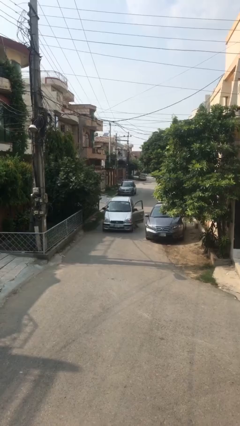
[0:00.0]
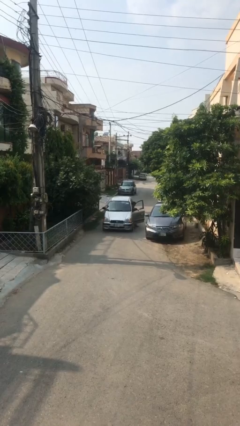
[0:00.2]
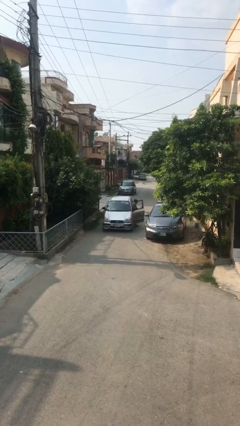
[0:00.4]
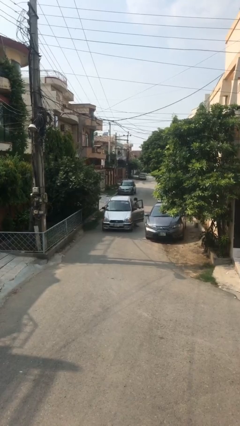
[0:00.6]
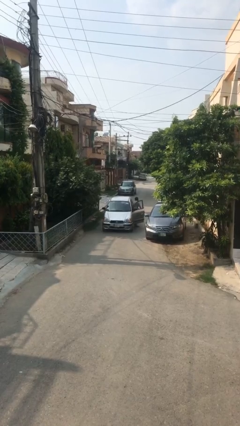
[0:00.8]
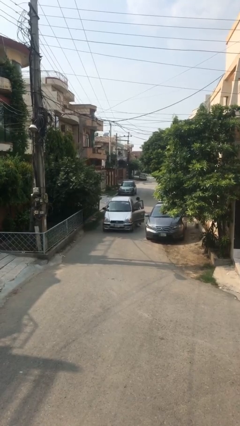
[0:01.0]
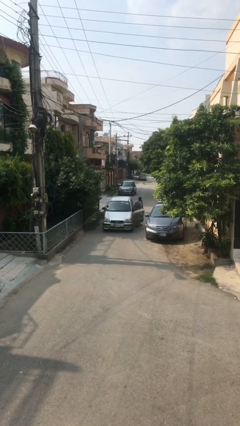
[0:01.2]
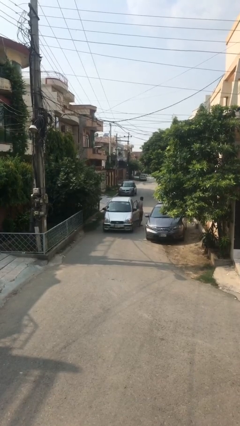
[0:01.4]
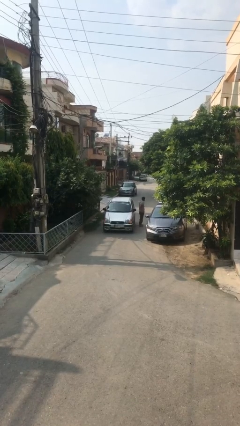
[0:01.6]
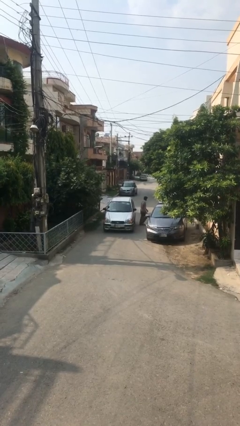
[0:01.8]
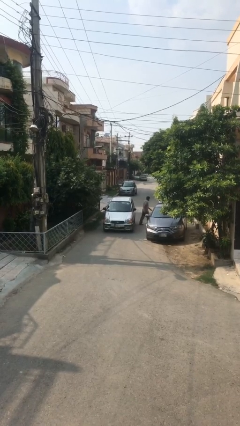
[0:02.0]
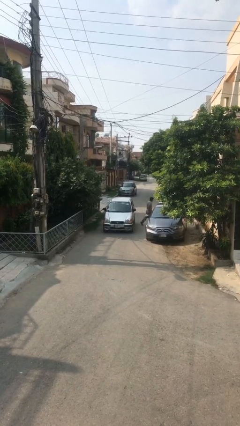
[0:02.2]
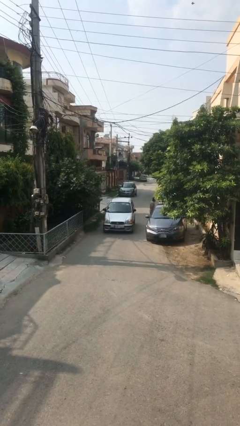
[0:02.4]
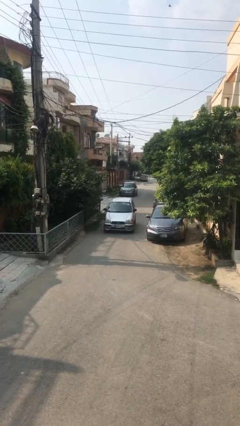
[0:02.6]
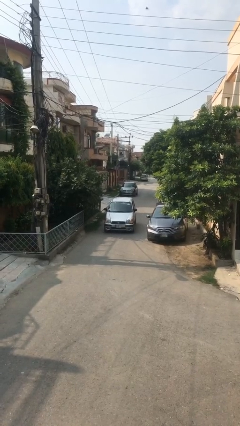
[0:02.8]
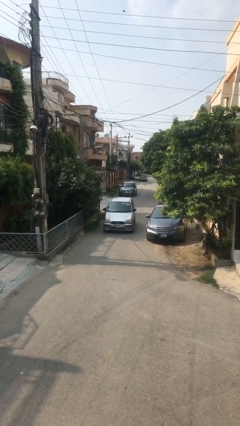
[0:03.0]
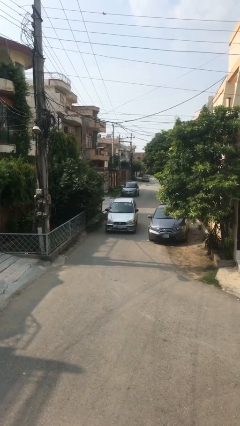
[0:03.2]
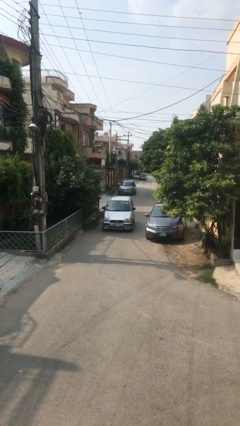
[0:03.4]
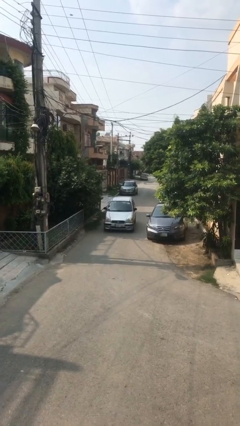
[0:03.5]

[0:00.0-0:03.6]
car drops off person

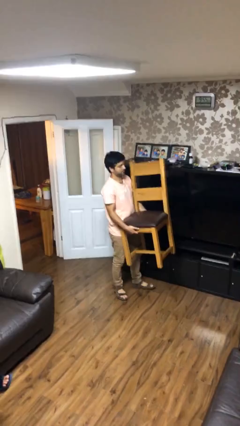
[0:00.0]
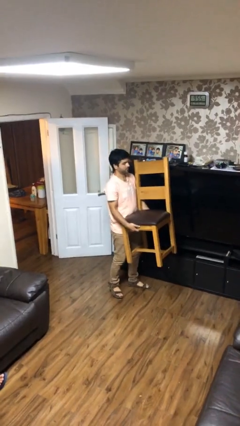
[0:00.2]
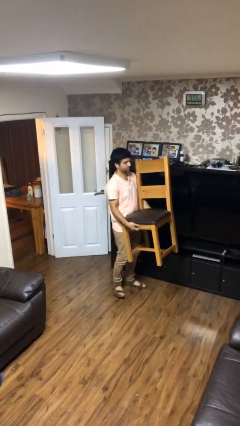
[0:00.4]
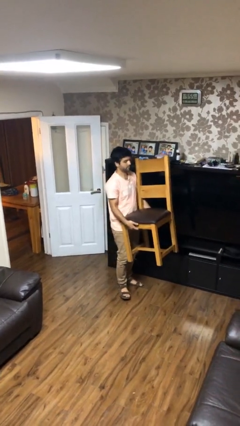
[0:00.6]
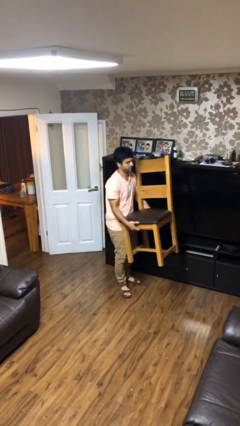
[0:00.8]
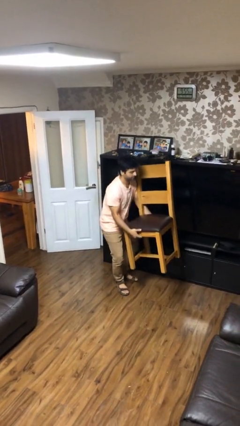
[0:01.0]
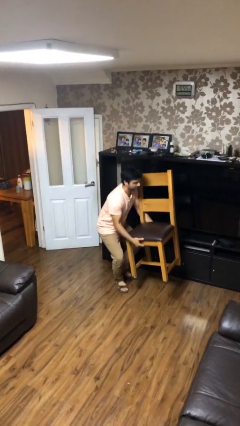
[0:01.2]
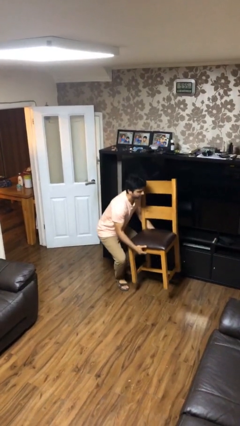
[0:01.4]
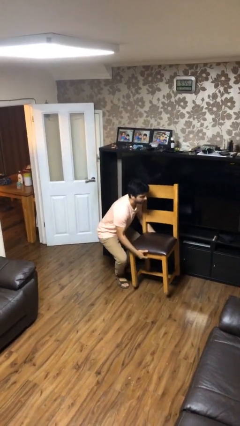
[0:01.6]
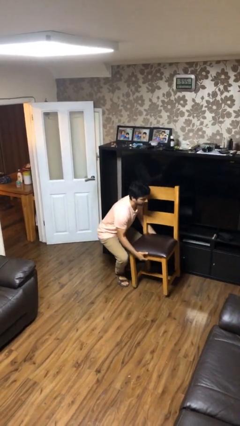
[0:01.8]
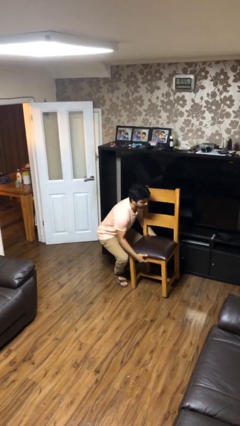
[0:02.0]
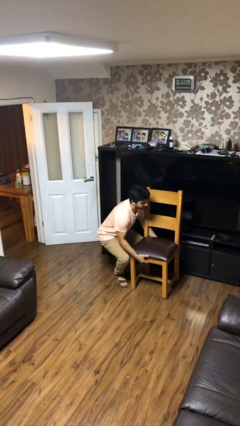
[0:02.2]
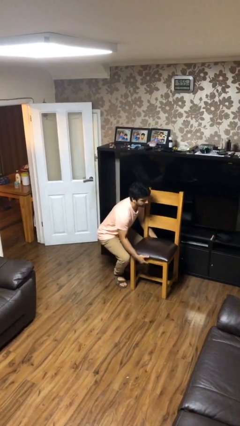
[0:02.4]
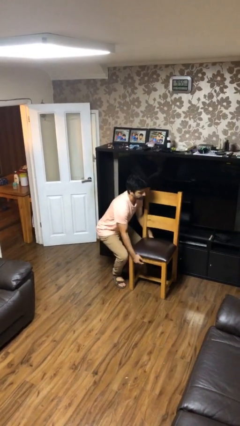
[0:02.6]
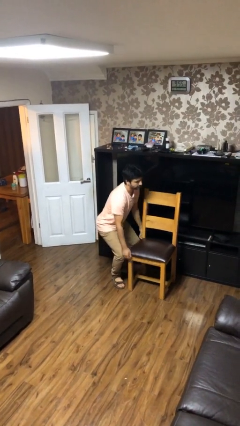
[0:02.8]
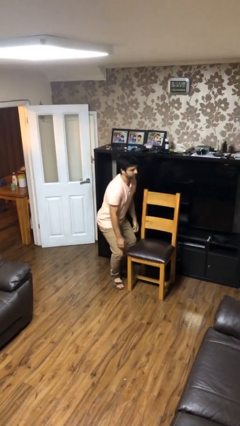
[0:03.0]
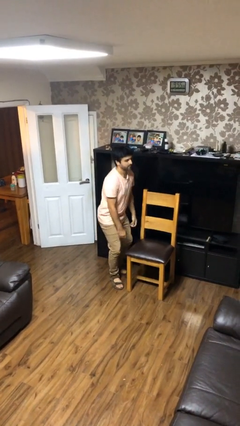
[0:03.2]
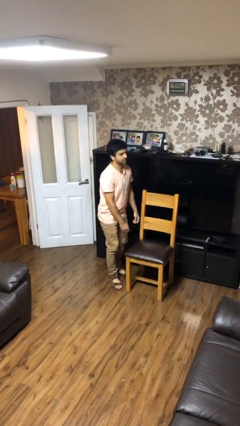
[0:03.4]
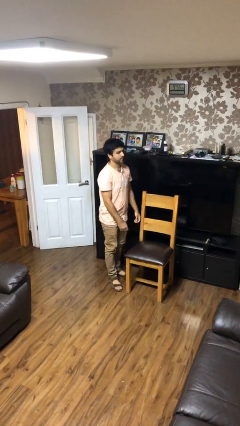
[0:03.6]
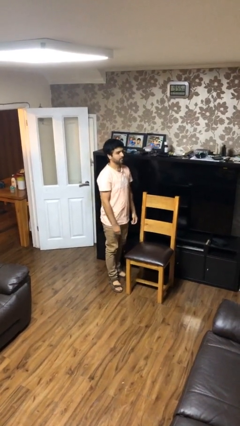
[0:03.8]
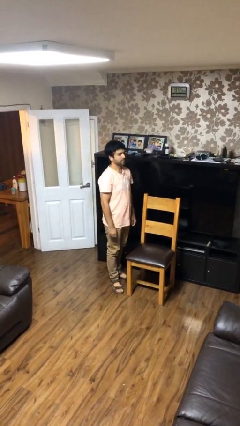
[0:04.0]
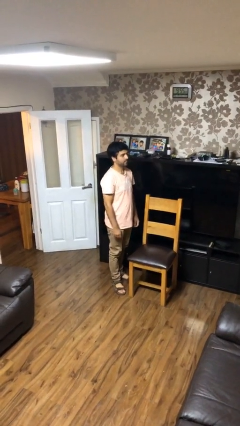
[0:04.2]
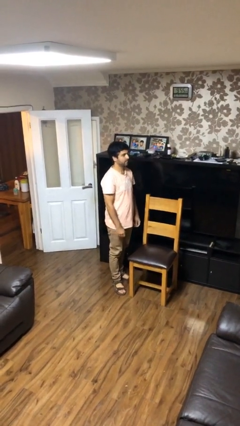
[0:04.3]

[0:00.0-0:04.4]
person puts down object on floor

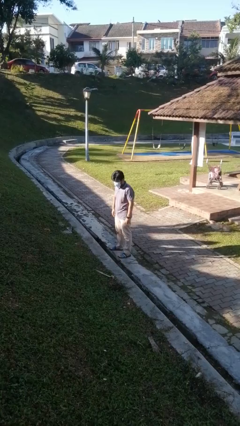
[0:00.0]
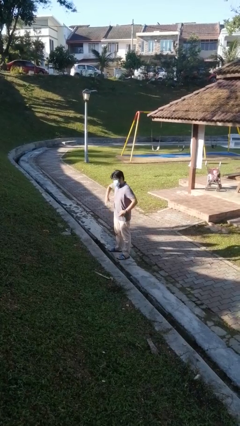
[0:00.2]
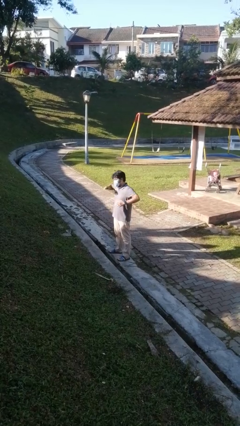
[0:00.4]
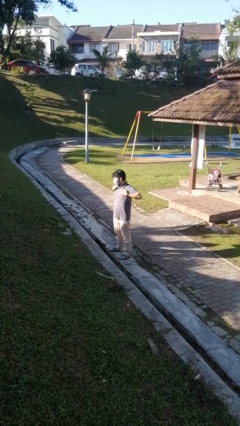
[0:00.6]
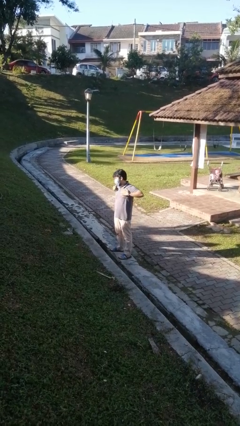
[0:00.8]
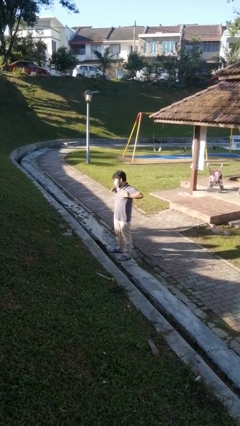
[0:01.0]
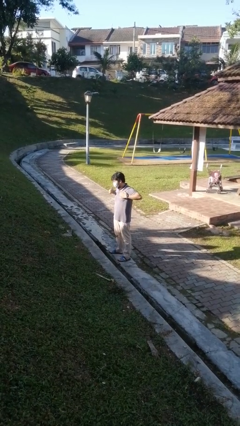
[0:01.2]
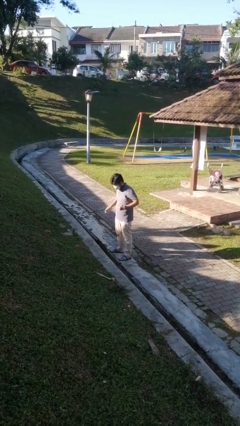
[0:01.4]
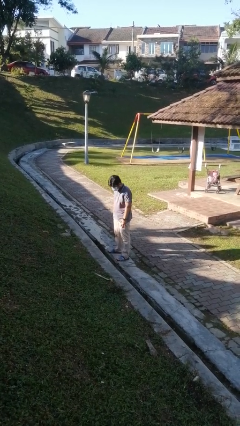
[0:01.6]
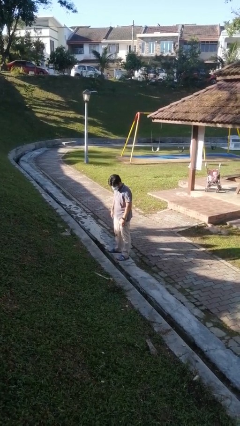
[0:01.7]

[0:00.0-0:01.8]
person drums on chest

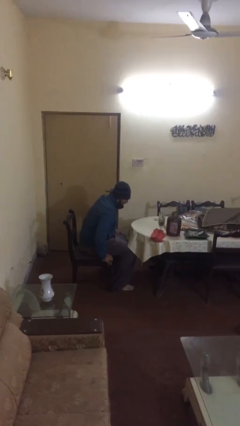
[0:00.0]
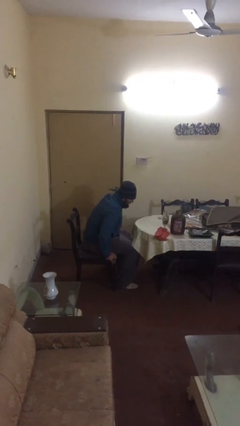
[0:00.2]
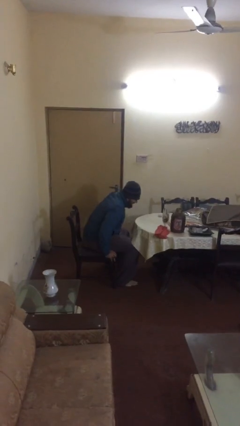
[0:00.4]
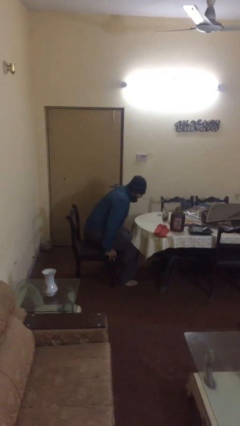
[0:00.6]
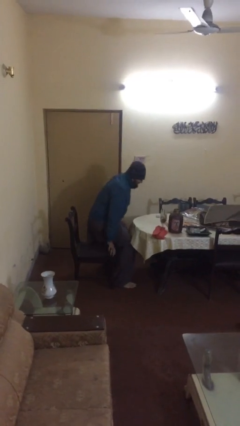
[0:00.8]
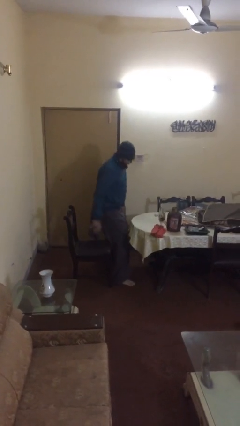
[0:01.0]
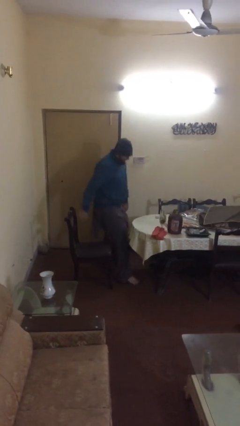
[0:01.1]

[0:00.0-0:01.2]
person stands up

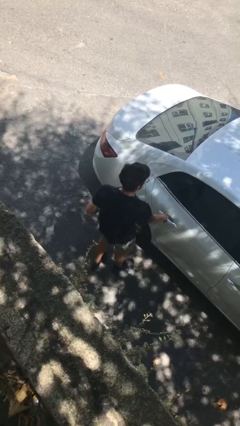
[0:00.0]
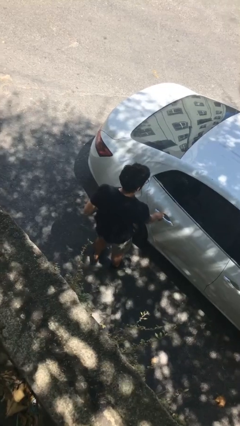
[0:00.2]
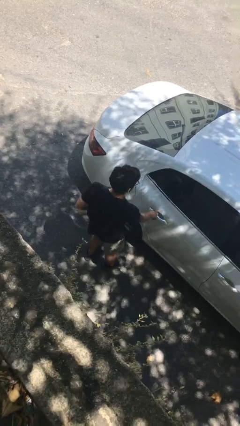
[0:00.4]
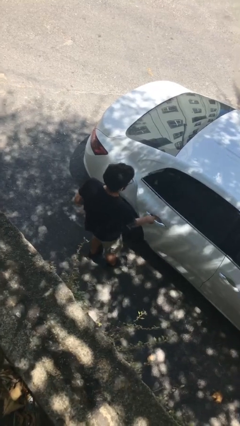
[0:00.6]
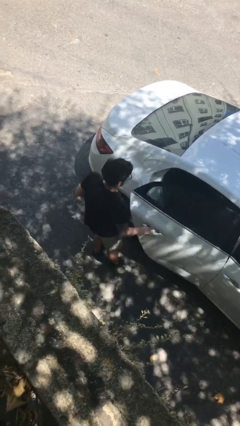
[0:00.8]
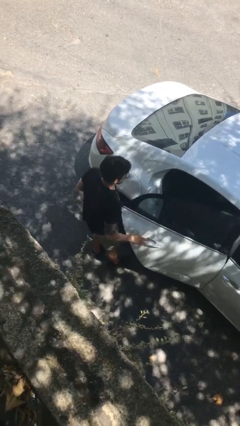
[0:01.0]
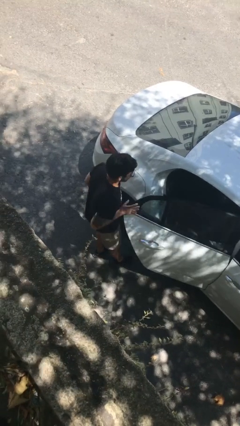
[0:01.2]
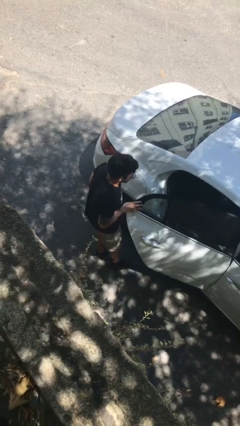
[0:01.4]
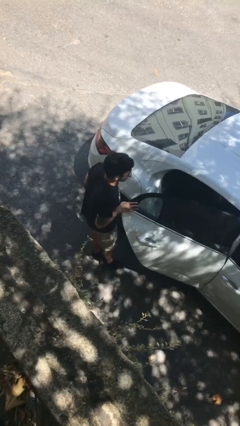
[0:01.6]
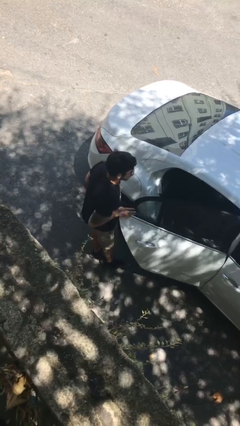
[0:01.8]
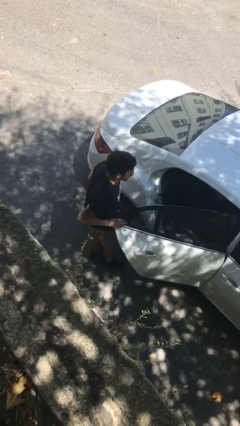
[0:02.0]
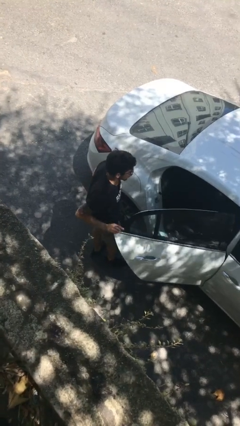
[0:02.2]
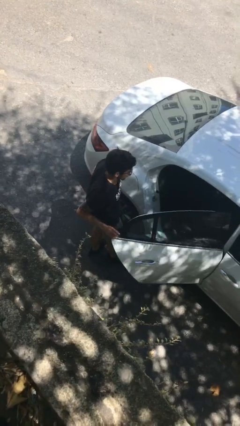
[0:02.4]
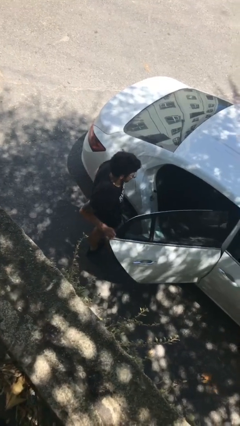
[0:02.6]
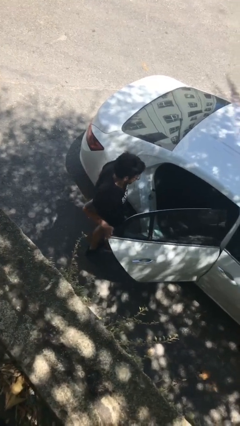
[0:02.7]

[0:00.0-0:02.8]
person opens car door

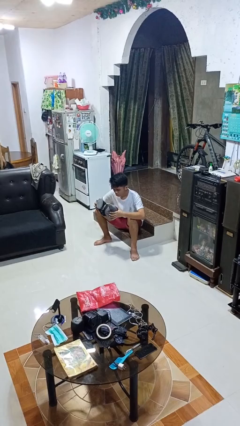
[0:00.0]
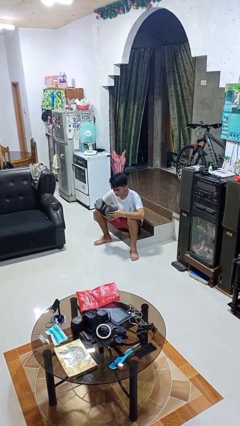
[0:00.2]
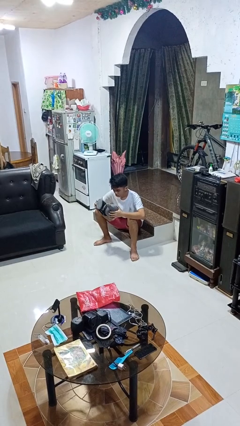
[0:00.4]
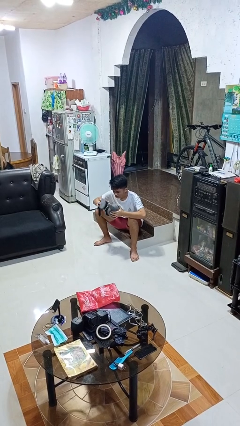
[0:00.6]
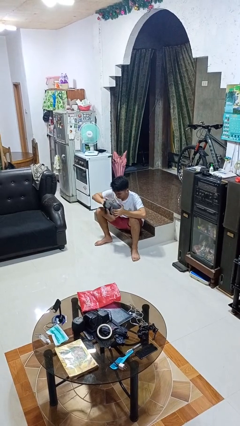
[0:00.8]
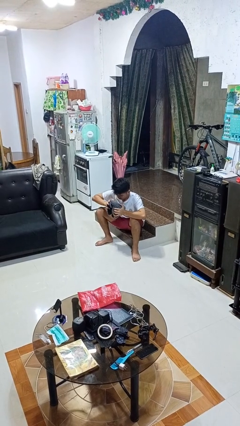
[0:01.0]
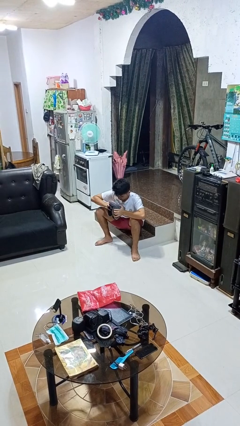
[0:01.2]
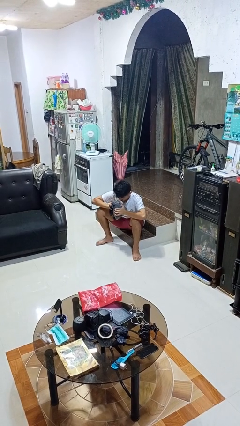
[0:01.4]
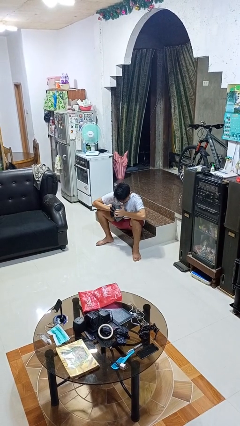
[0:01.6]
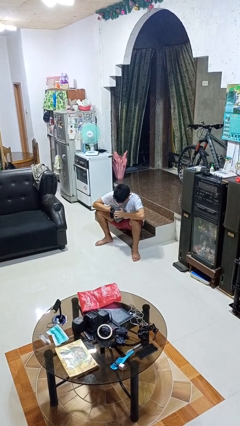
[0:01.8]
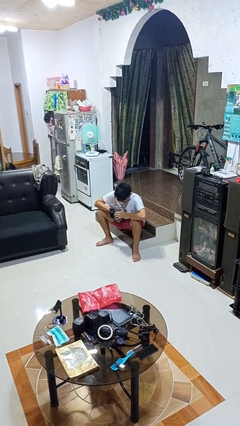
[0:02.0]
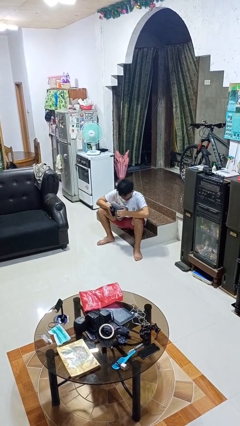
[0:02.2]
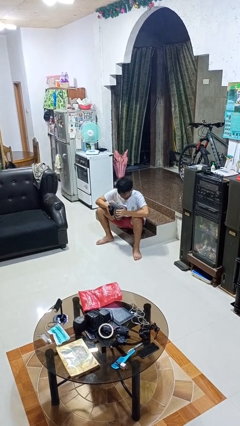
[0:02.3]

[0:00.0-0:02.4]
person squeezes object

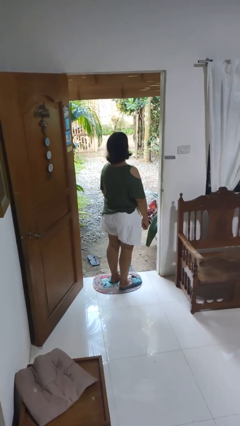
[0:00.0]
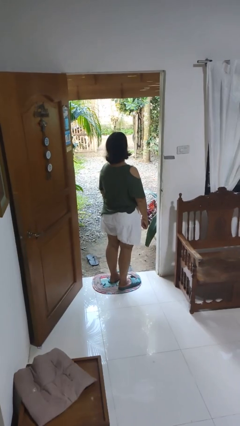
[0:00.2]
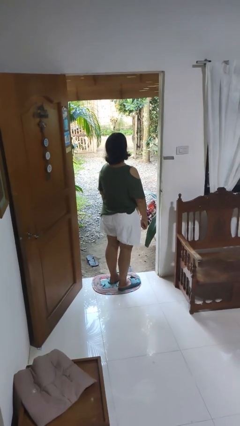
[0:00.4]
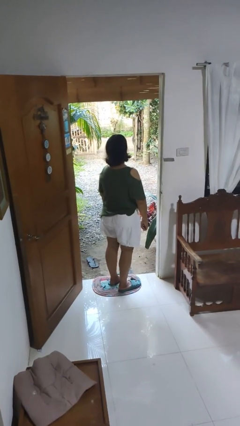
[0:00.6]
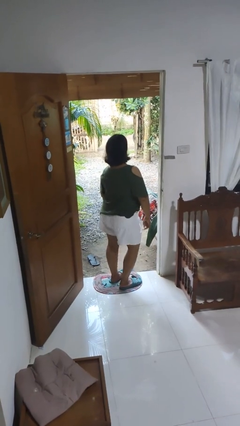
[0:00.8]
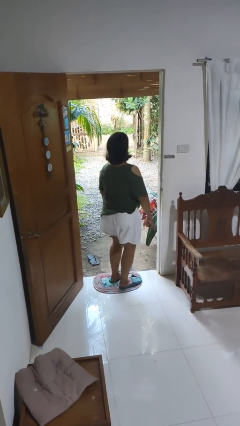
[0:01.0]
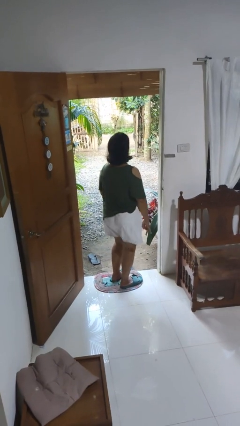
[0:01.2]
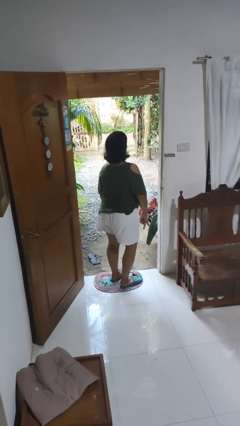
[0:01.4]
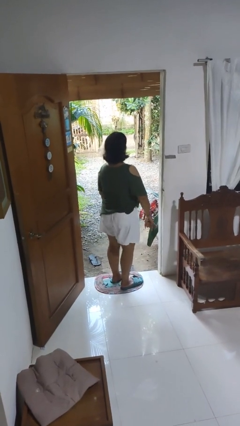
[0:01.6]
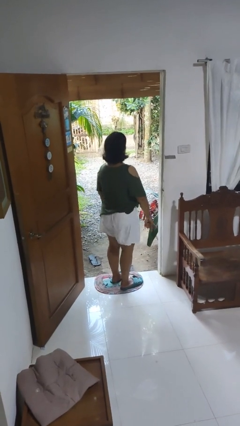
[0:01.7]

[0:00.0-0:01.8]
person wiggles hips
